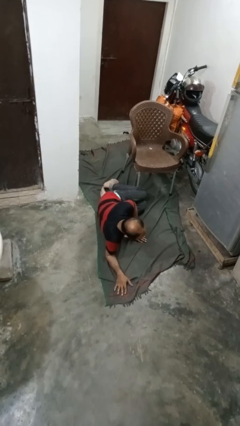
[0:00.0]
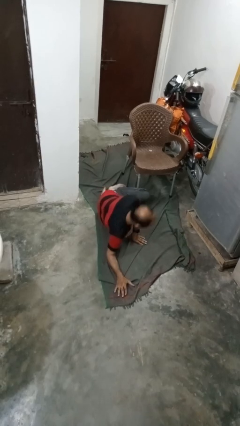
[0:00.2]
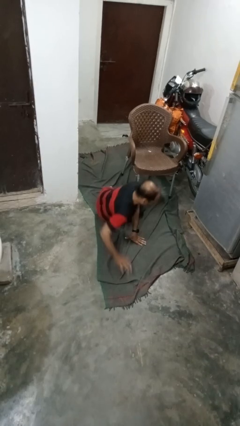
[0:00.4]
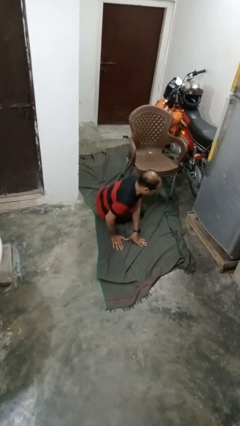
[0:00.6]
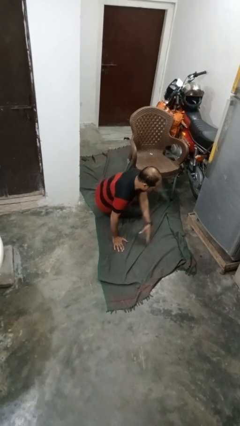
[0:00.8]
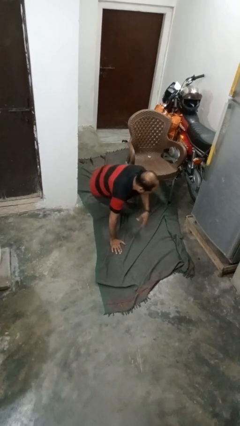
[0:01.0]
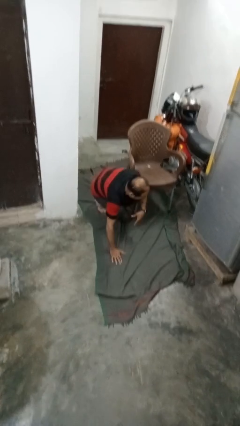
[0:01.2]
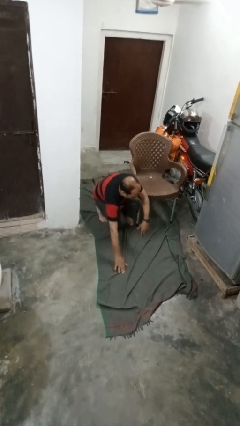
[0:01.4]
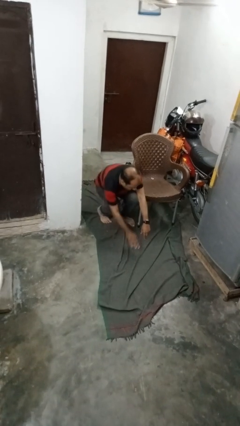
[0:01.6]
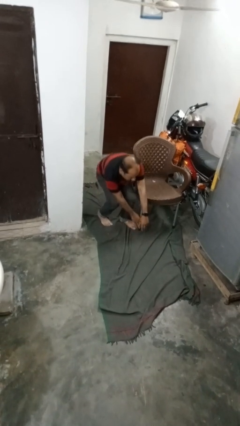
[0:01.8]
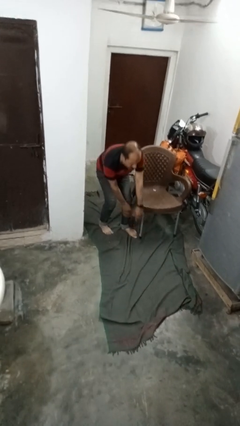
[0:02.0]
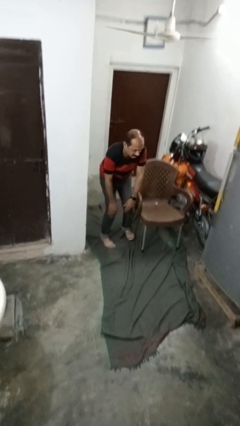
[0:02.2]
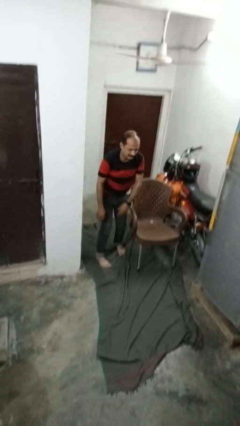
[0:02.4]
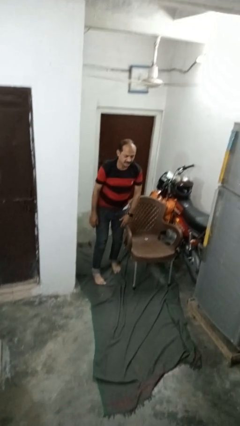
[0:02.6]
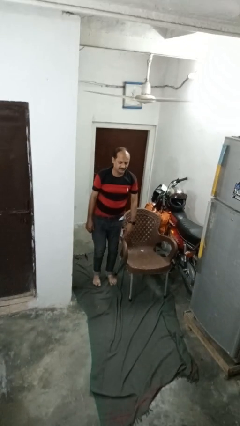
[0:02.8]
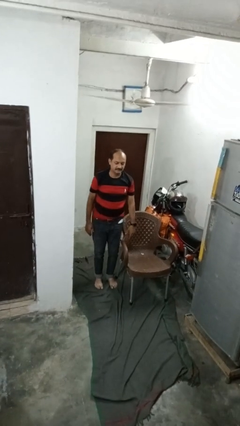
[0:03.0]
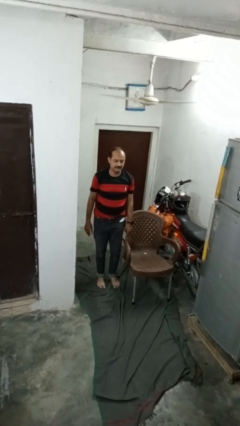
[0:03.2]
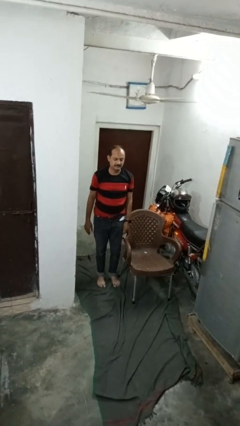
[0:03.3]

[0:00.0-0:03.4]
person stands up from floor

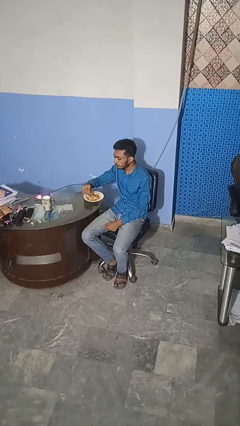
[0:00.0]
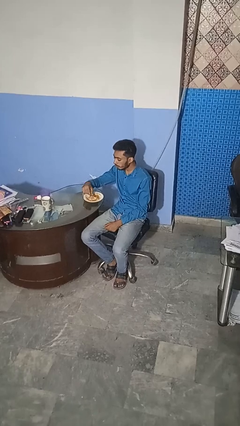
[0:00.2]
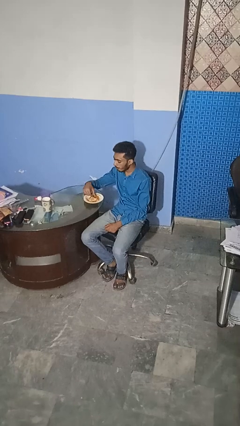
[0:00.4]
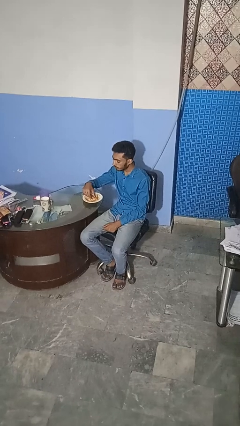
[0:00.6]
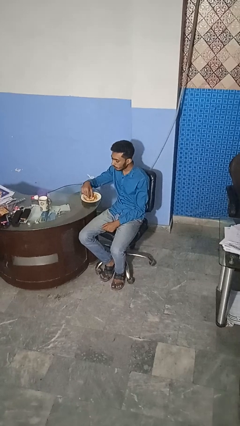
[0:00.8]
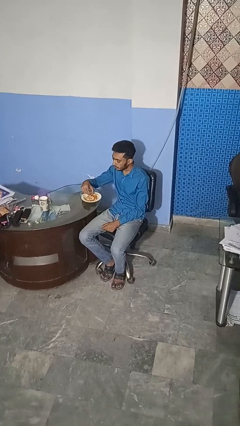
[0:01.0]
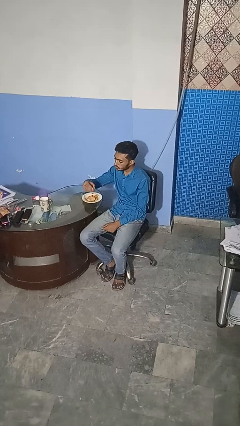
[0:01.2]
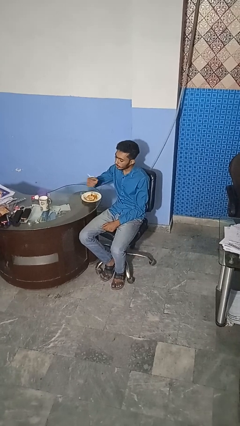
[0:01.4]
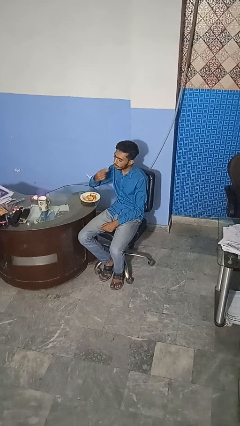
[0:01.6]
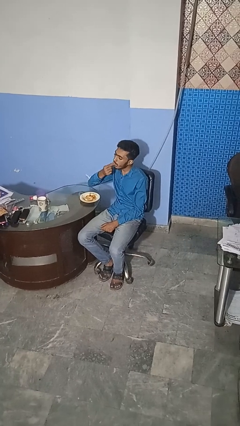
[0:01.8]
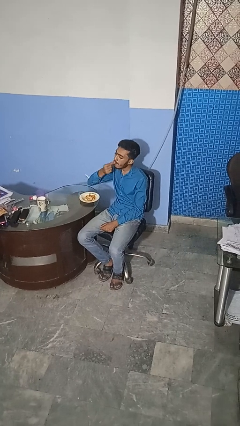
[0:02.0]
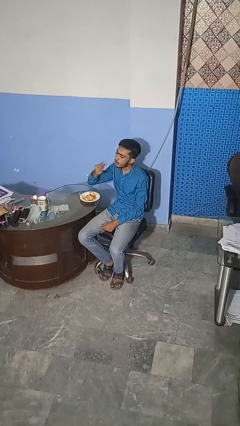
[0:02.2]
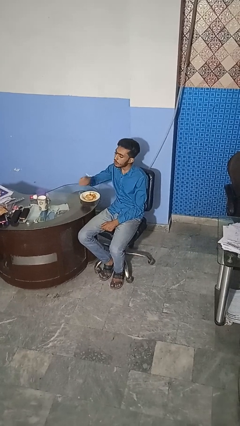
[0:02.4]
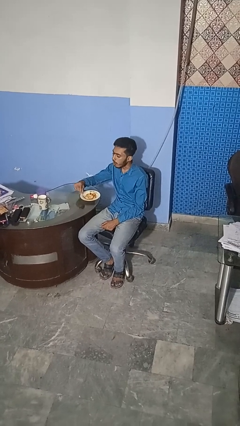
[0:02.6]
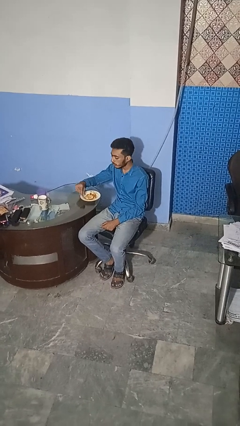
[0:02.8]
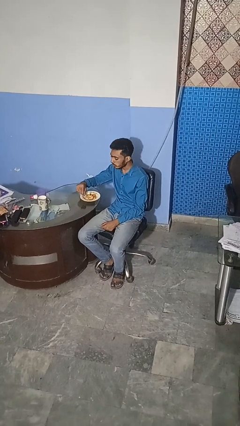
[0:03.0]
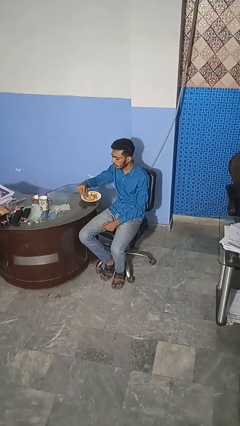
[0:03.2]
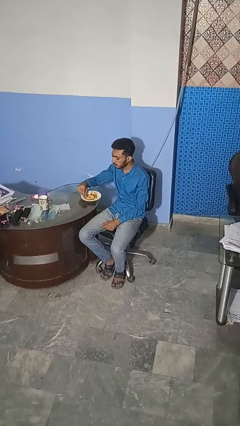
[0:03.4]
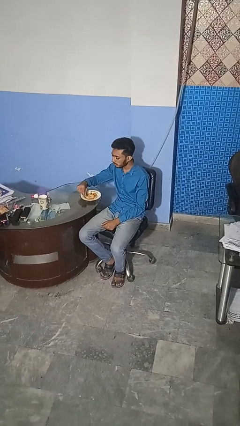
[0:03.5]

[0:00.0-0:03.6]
person eats with hands

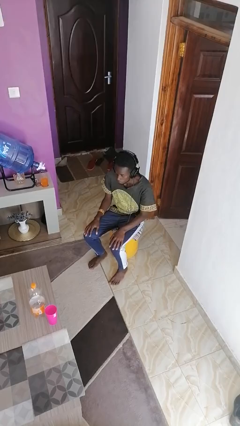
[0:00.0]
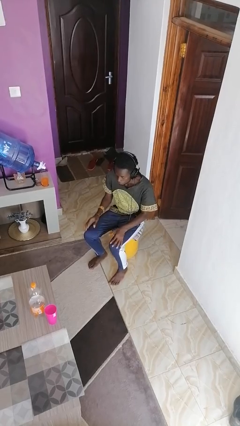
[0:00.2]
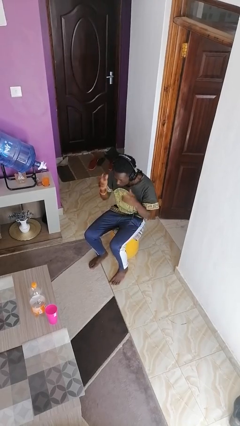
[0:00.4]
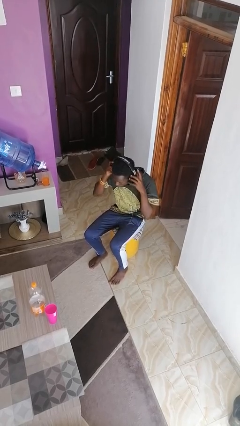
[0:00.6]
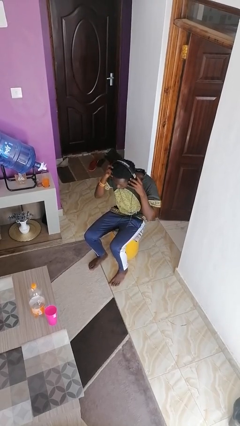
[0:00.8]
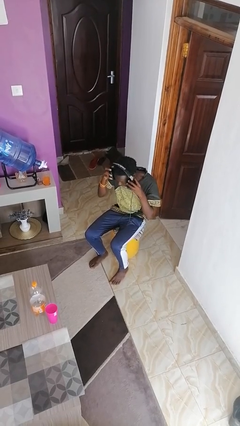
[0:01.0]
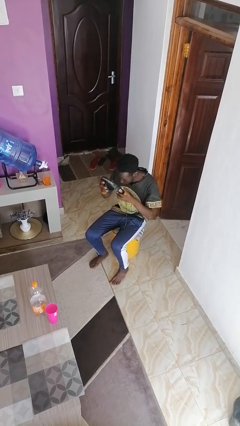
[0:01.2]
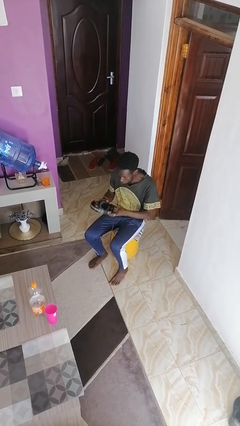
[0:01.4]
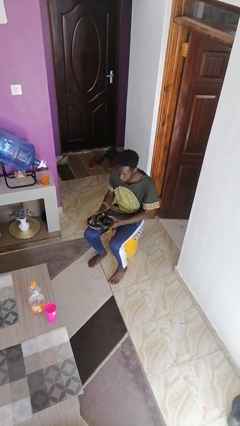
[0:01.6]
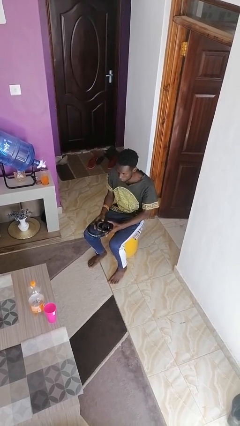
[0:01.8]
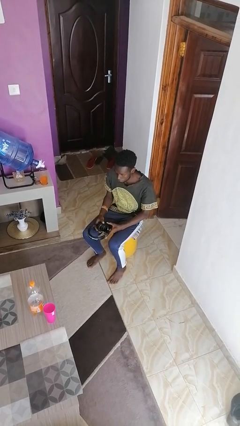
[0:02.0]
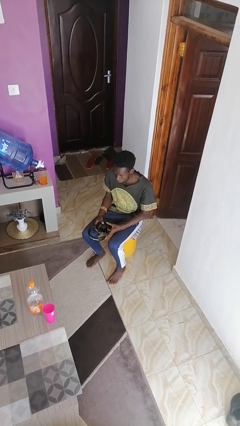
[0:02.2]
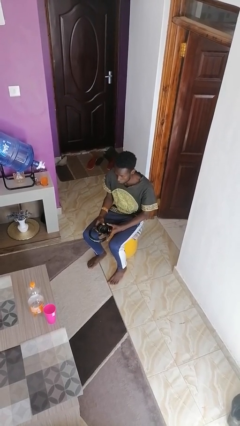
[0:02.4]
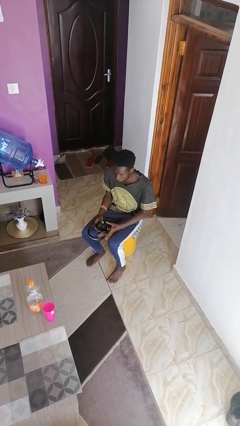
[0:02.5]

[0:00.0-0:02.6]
person takes off headphones

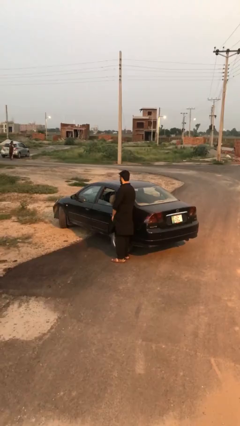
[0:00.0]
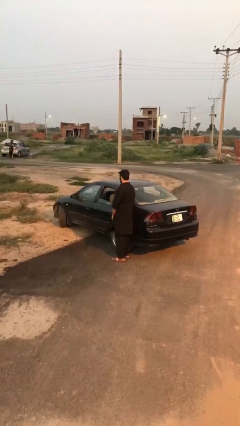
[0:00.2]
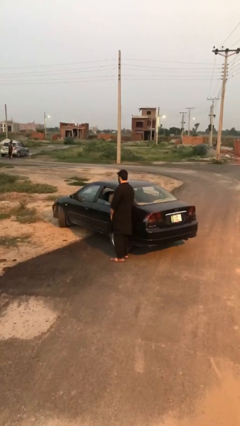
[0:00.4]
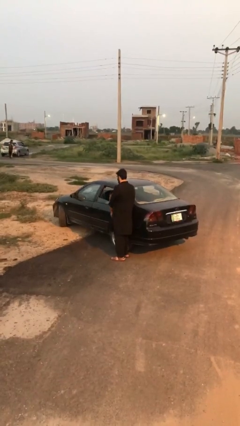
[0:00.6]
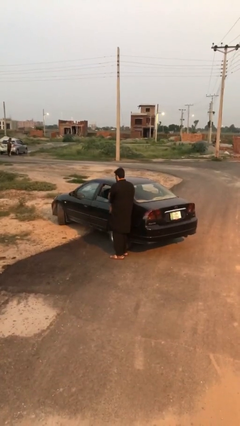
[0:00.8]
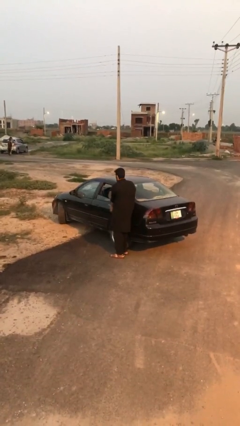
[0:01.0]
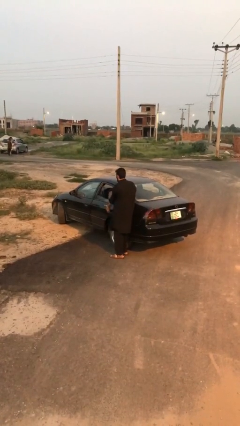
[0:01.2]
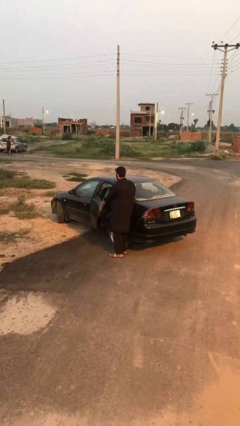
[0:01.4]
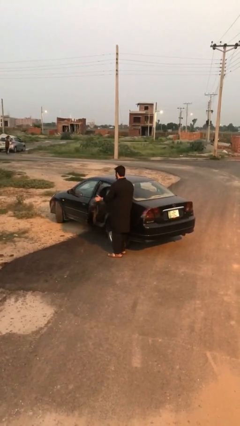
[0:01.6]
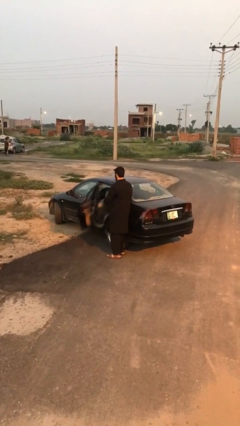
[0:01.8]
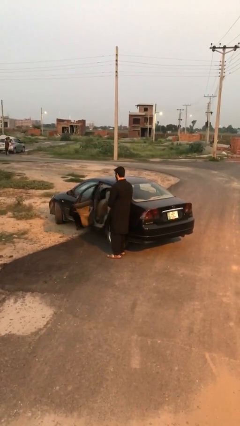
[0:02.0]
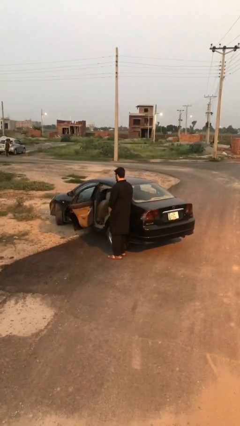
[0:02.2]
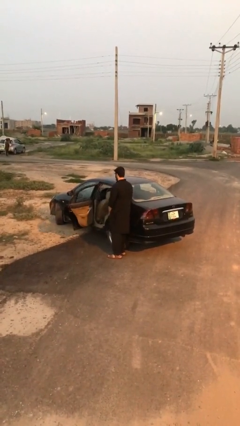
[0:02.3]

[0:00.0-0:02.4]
person opens car door

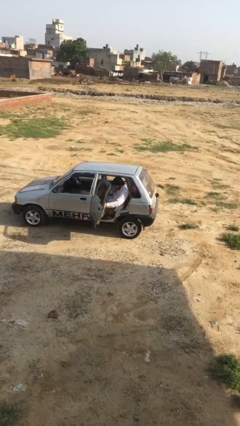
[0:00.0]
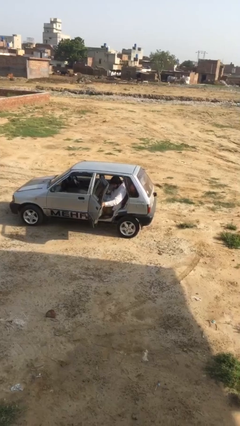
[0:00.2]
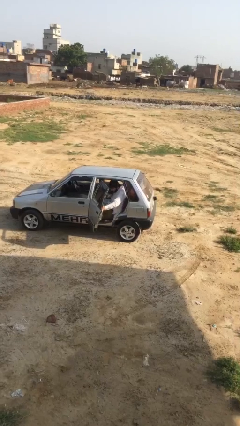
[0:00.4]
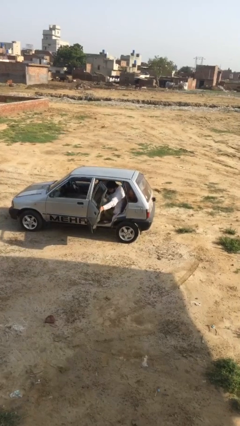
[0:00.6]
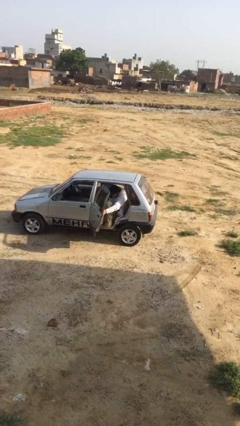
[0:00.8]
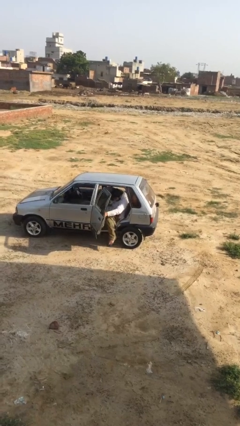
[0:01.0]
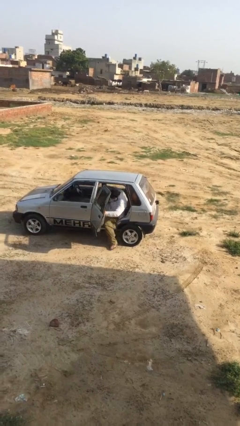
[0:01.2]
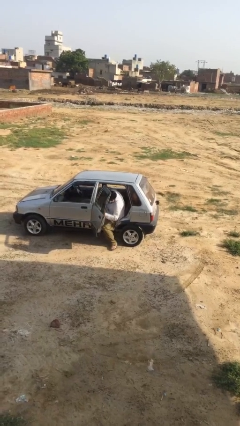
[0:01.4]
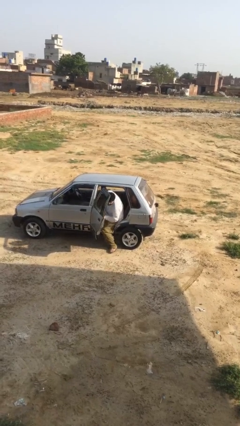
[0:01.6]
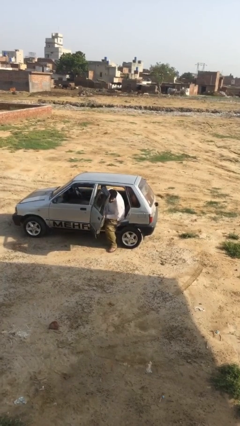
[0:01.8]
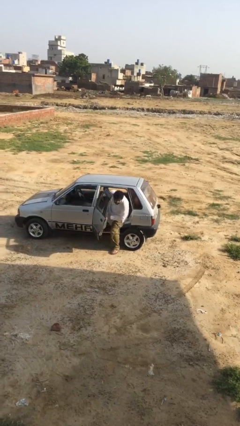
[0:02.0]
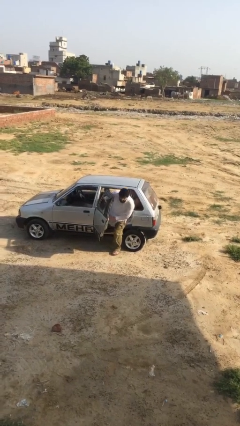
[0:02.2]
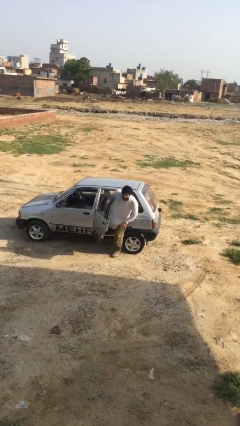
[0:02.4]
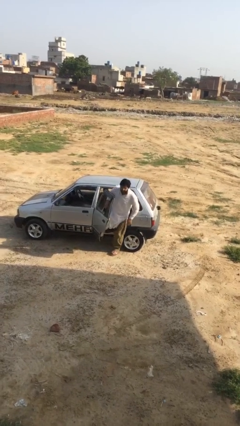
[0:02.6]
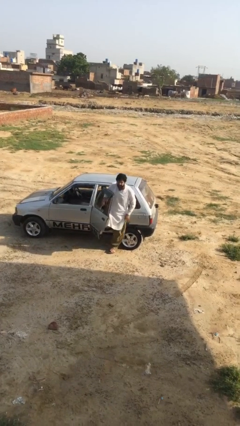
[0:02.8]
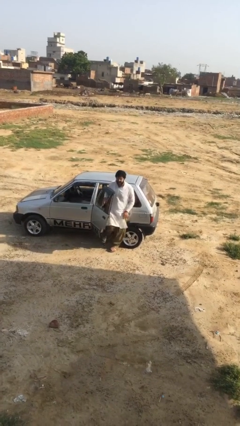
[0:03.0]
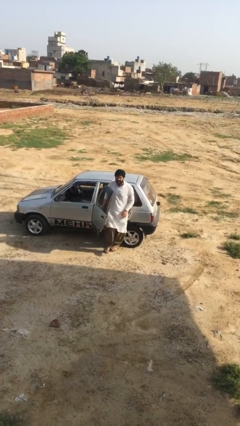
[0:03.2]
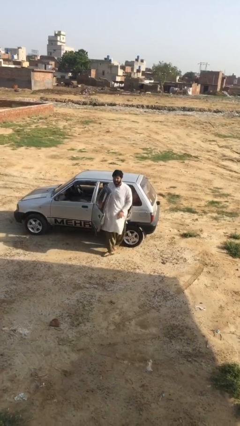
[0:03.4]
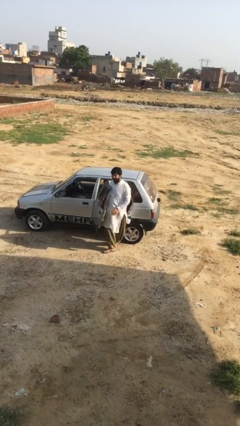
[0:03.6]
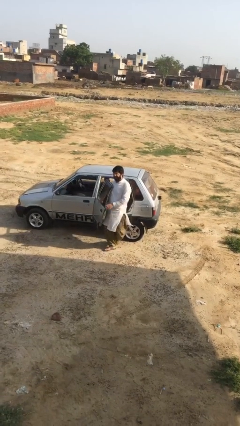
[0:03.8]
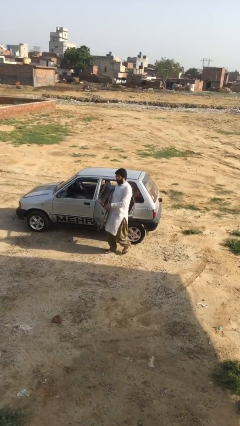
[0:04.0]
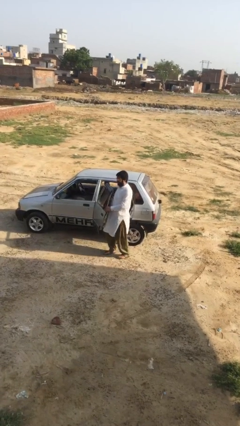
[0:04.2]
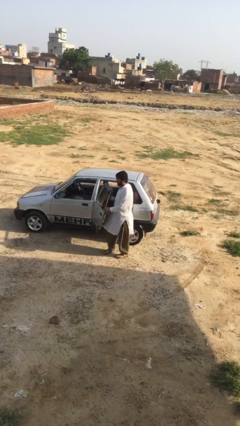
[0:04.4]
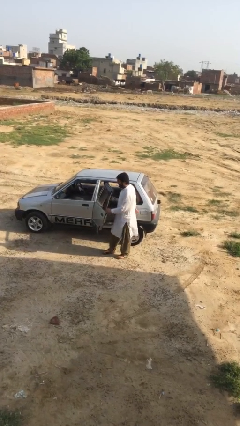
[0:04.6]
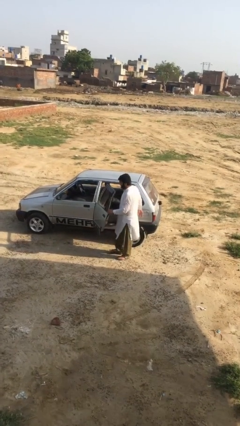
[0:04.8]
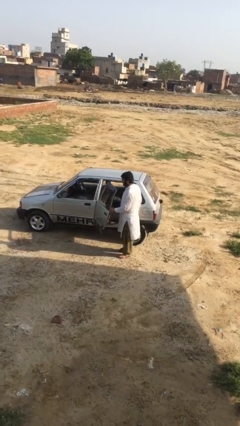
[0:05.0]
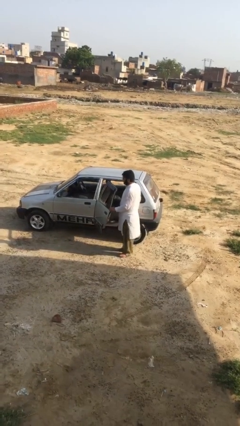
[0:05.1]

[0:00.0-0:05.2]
person exits car

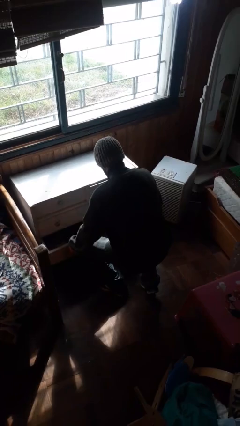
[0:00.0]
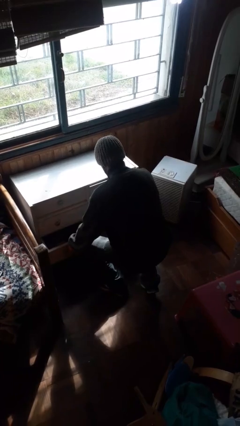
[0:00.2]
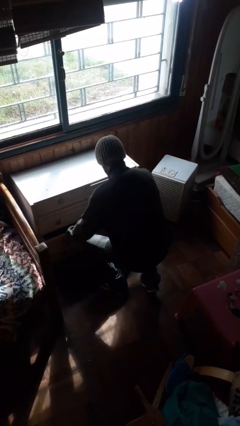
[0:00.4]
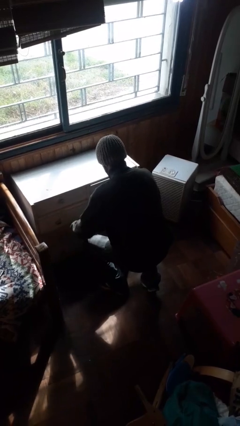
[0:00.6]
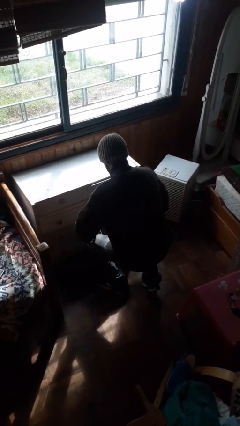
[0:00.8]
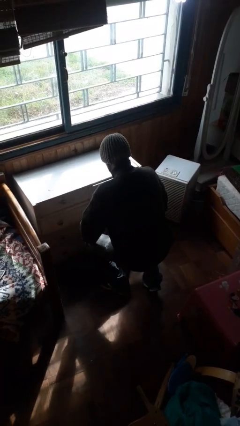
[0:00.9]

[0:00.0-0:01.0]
person closes dresser drawer
